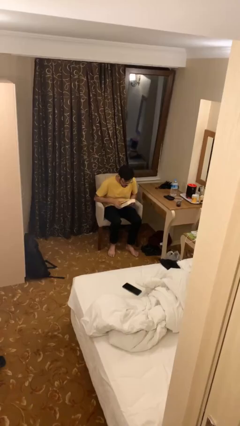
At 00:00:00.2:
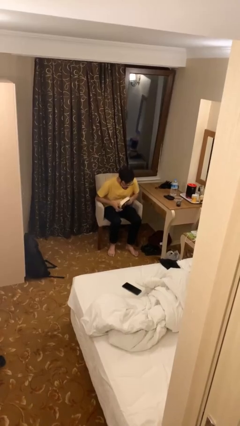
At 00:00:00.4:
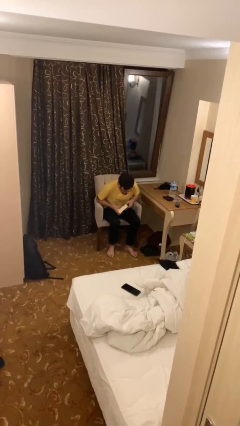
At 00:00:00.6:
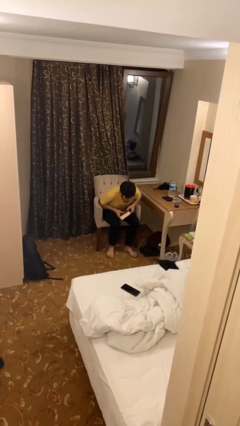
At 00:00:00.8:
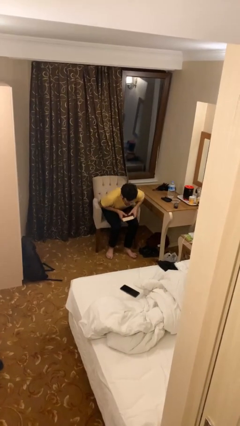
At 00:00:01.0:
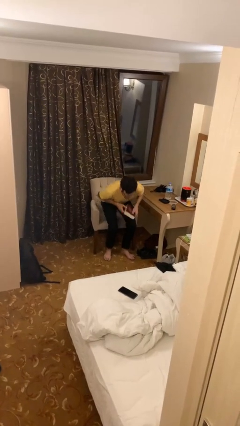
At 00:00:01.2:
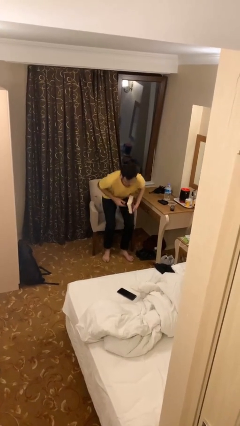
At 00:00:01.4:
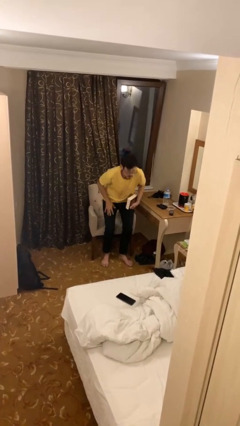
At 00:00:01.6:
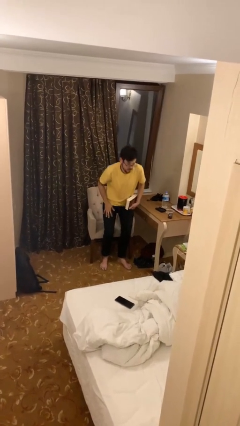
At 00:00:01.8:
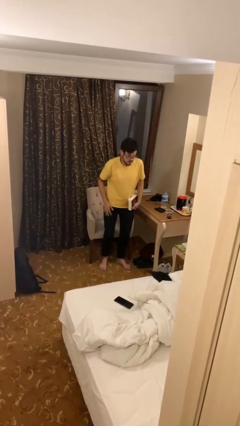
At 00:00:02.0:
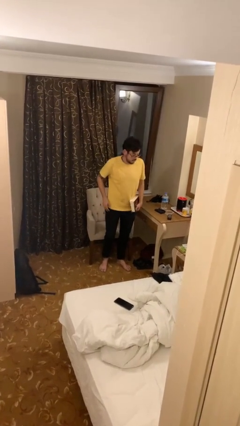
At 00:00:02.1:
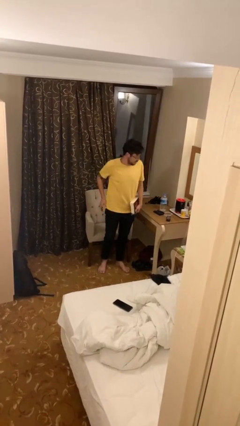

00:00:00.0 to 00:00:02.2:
person stands up

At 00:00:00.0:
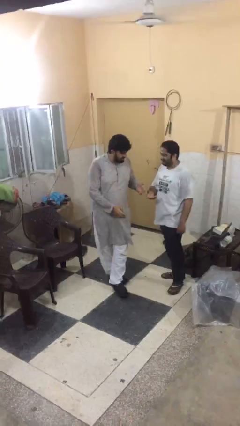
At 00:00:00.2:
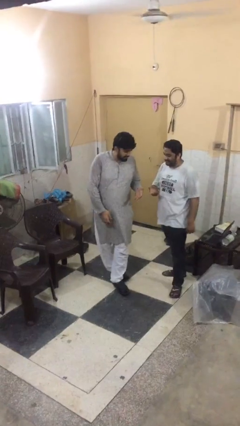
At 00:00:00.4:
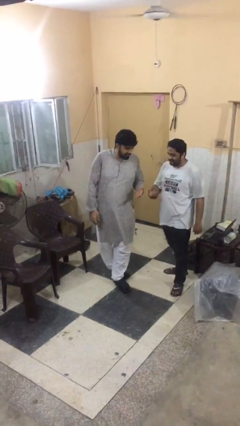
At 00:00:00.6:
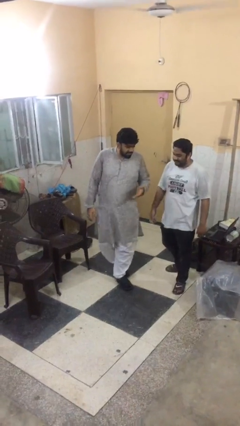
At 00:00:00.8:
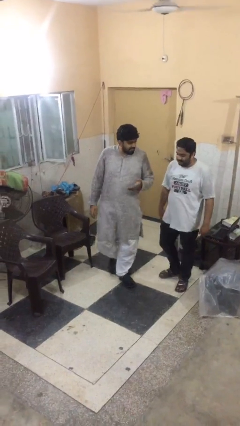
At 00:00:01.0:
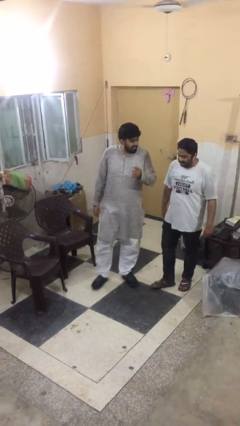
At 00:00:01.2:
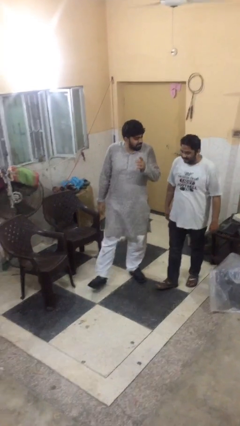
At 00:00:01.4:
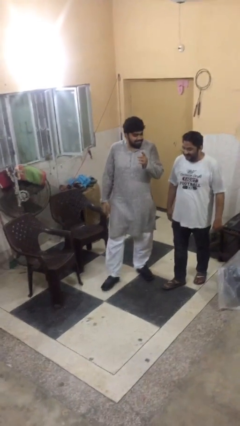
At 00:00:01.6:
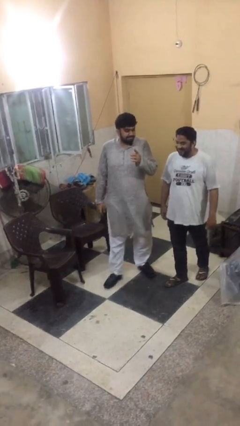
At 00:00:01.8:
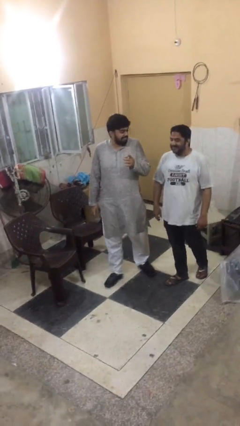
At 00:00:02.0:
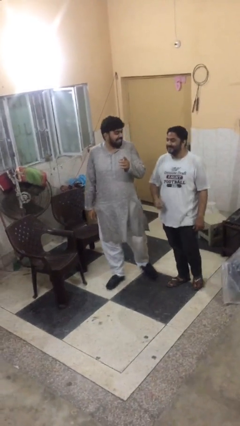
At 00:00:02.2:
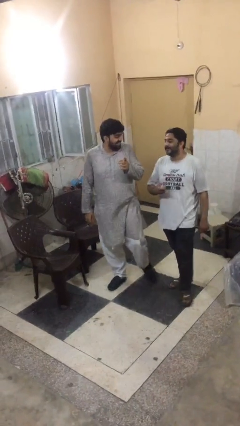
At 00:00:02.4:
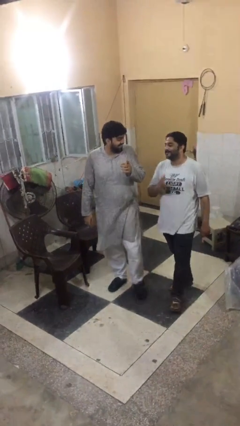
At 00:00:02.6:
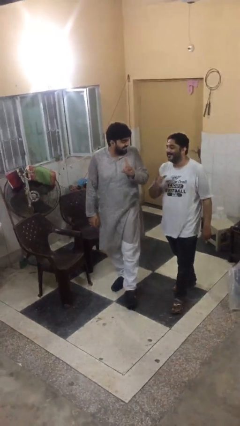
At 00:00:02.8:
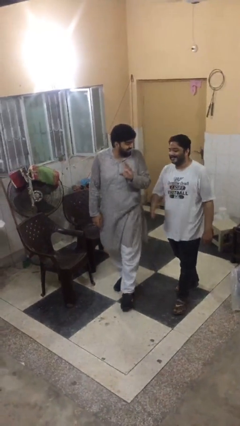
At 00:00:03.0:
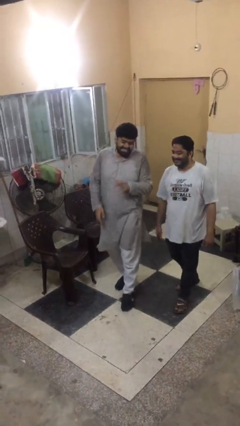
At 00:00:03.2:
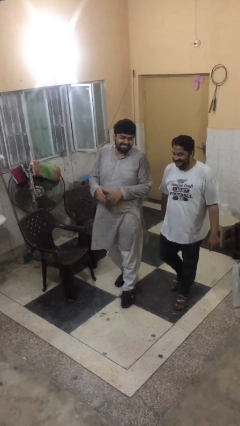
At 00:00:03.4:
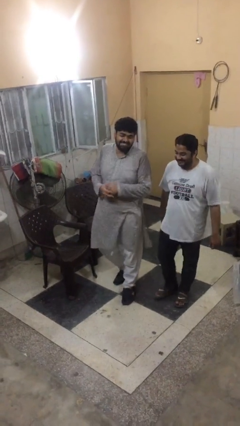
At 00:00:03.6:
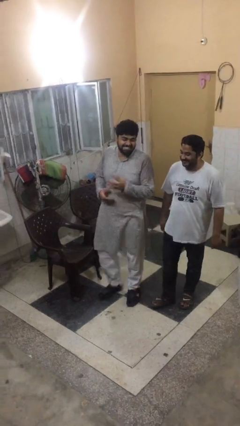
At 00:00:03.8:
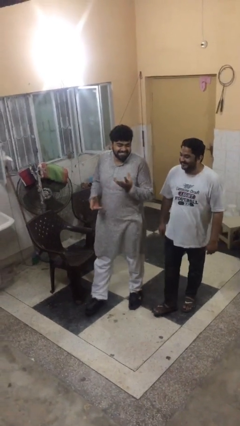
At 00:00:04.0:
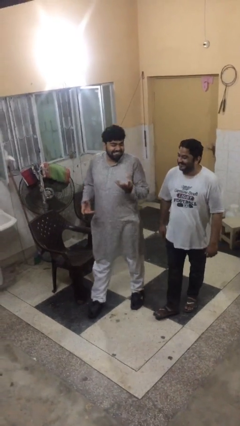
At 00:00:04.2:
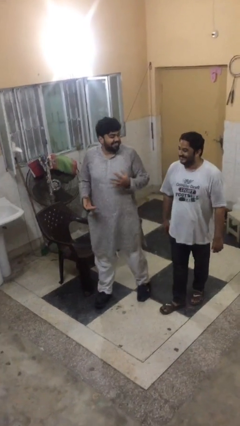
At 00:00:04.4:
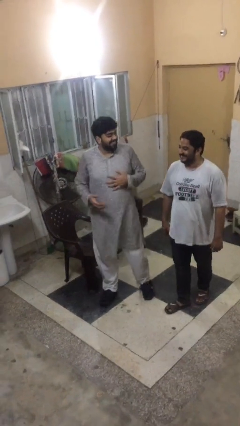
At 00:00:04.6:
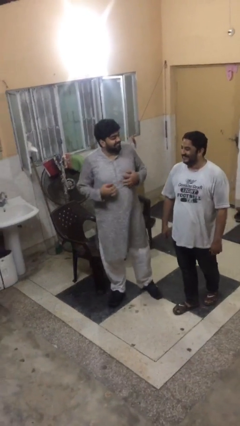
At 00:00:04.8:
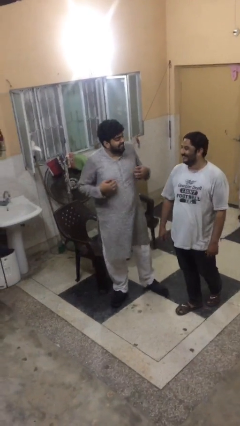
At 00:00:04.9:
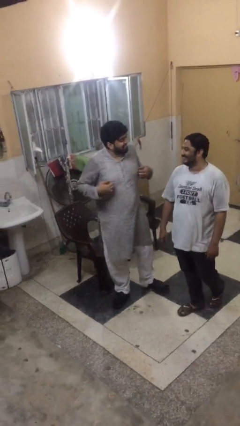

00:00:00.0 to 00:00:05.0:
person talks to person

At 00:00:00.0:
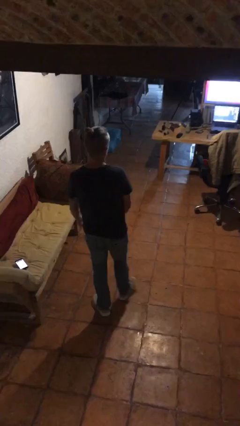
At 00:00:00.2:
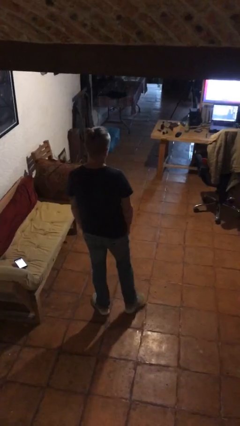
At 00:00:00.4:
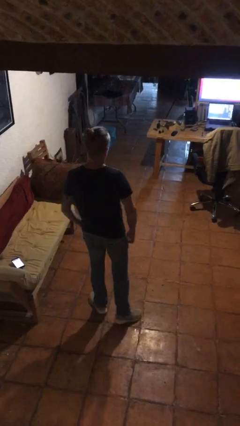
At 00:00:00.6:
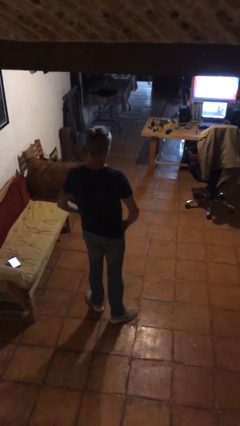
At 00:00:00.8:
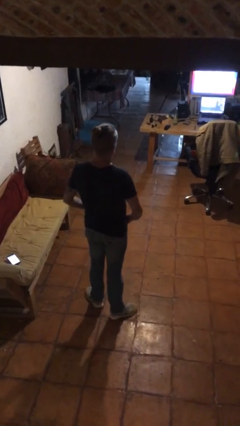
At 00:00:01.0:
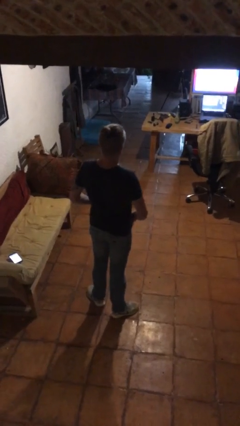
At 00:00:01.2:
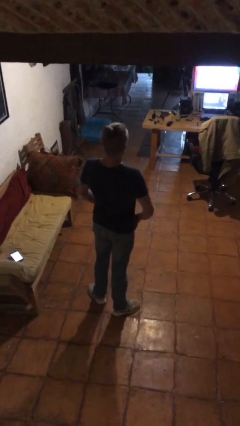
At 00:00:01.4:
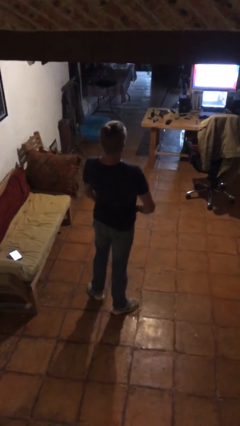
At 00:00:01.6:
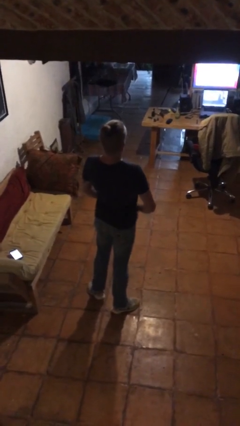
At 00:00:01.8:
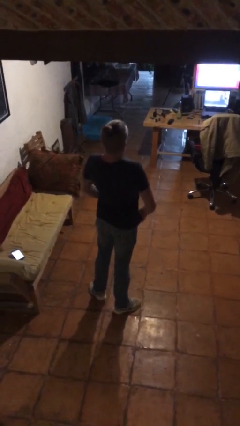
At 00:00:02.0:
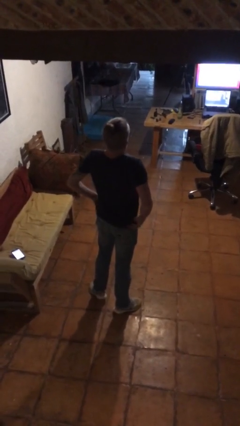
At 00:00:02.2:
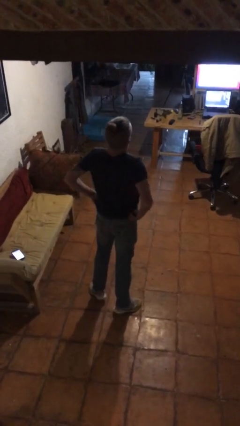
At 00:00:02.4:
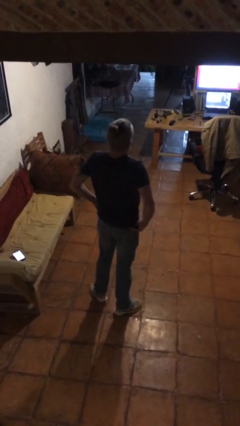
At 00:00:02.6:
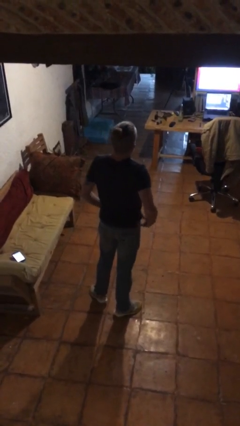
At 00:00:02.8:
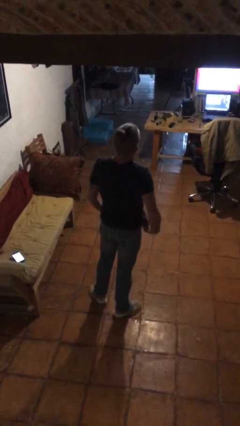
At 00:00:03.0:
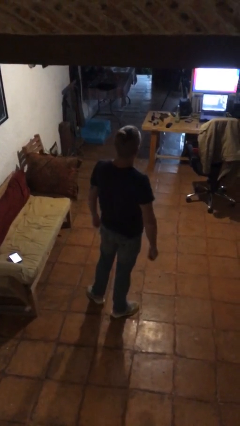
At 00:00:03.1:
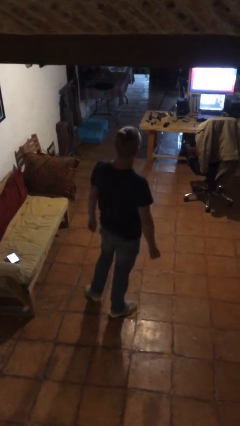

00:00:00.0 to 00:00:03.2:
person hikes up pants

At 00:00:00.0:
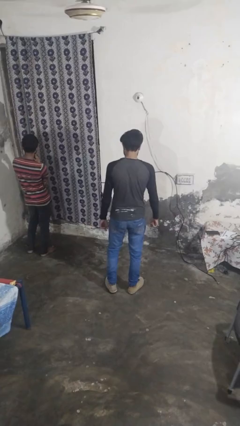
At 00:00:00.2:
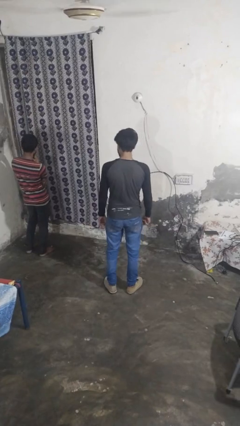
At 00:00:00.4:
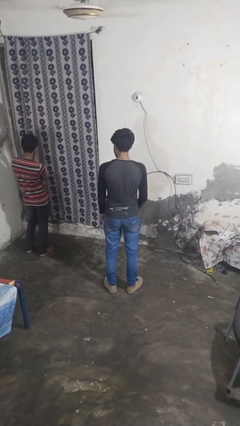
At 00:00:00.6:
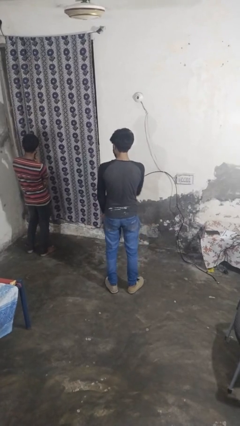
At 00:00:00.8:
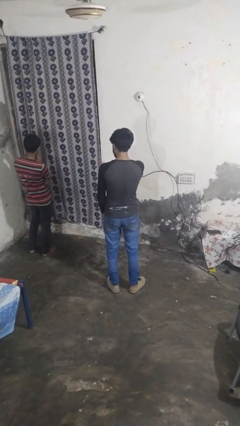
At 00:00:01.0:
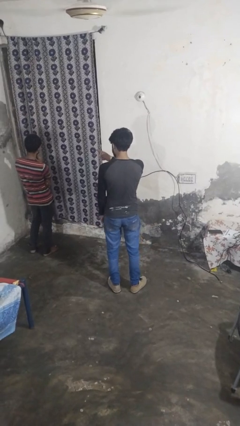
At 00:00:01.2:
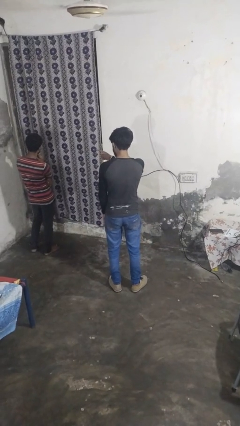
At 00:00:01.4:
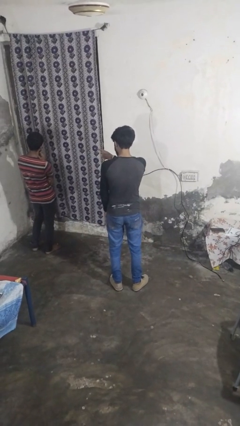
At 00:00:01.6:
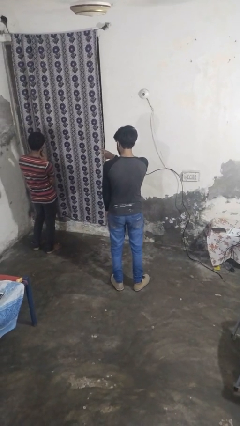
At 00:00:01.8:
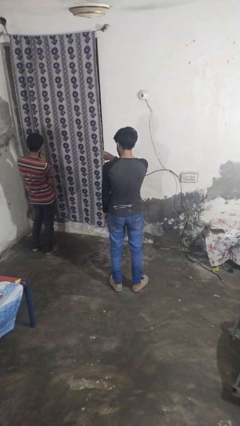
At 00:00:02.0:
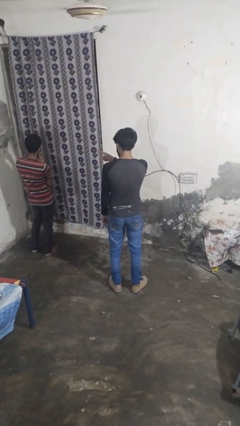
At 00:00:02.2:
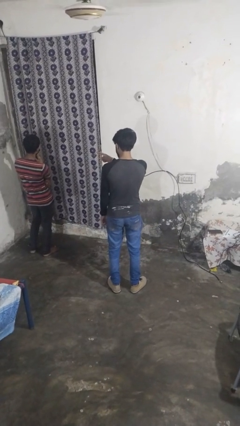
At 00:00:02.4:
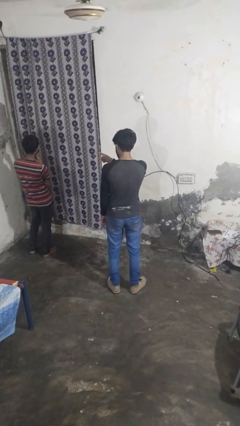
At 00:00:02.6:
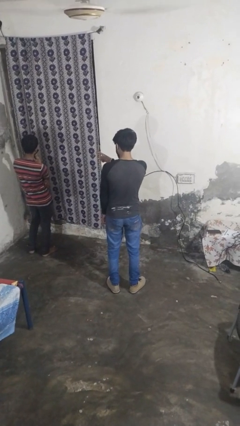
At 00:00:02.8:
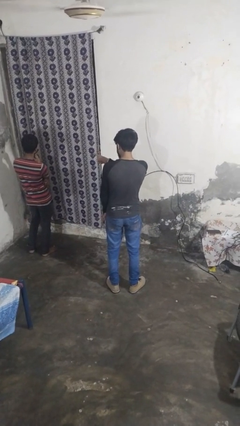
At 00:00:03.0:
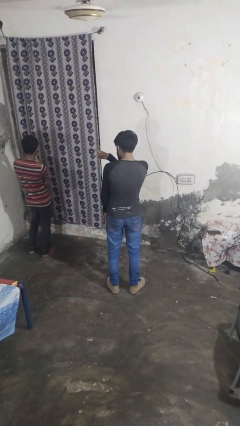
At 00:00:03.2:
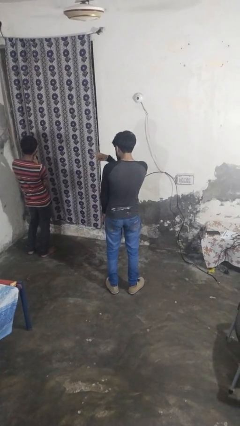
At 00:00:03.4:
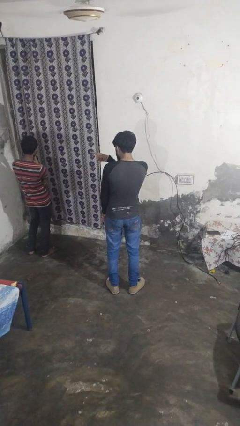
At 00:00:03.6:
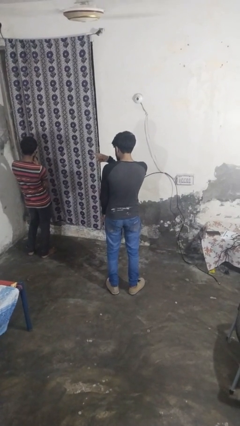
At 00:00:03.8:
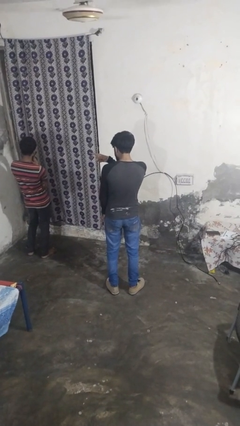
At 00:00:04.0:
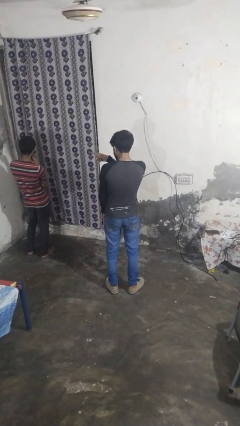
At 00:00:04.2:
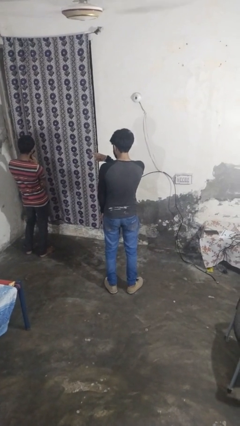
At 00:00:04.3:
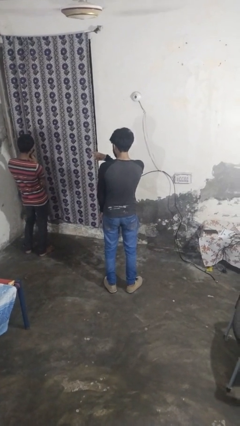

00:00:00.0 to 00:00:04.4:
person points at person

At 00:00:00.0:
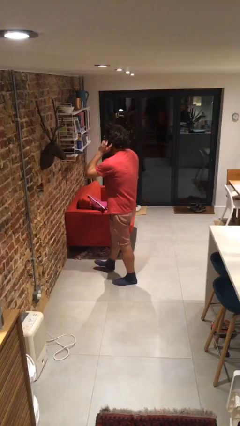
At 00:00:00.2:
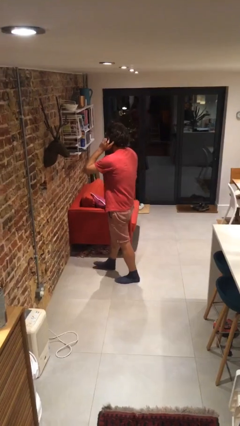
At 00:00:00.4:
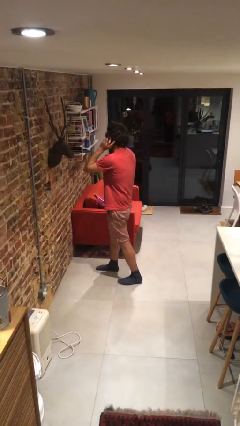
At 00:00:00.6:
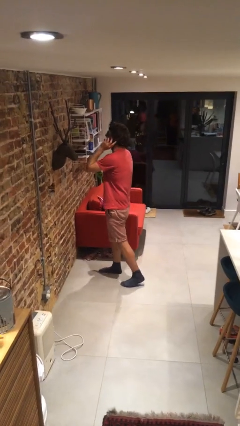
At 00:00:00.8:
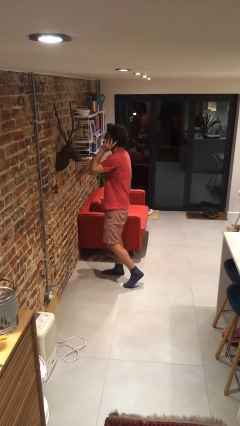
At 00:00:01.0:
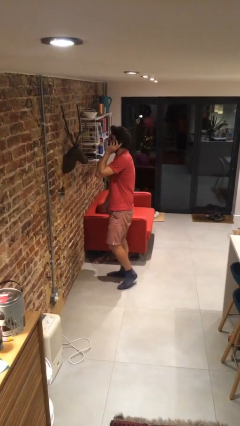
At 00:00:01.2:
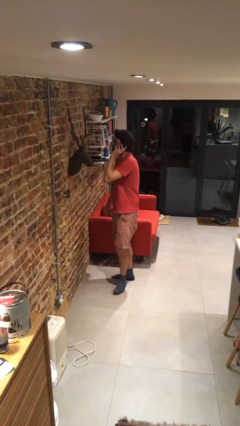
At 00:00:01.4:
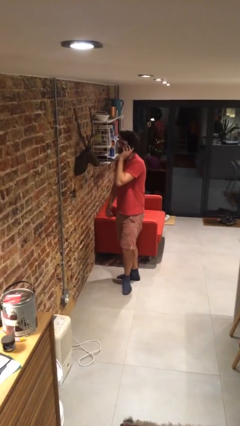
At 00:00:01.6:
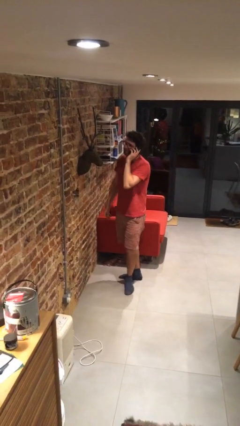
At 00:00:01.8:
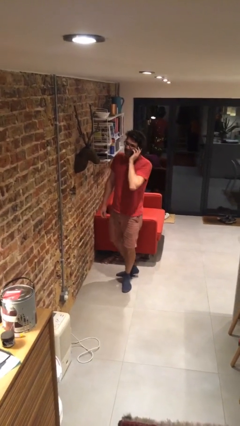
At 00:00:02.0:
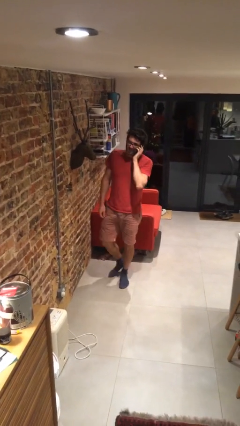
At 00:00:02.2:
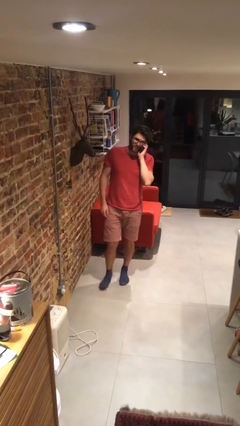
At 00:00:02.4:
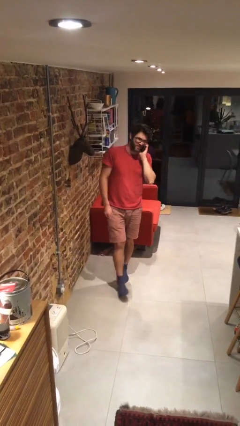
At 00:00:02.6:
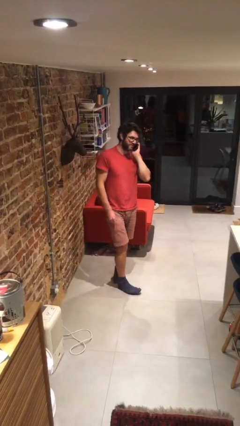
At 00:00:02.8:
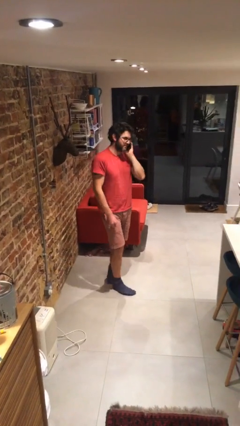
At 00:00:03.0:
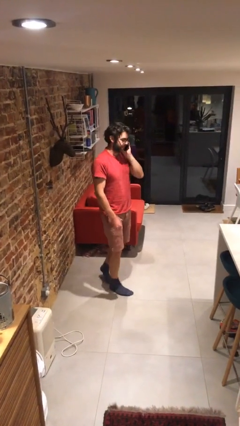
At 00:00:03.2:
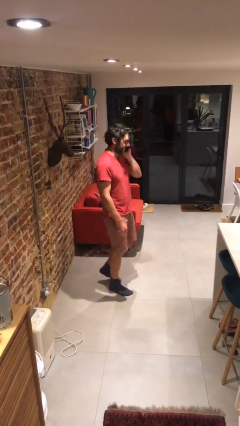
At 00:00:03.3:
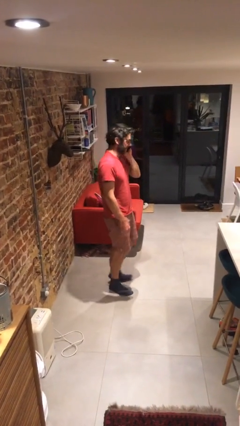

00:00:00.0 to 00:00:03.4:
person talks on phone
